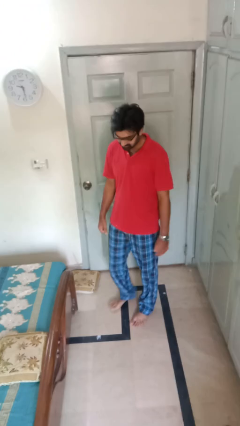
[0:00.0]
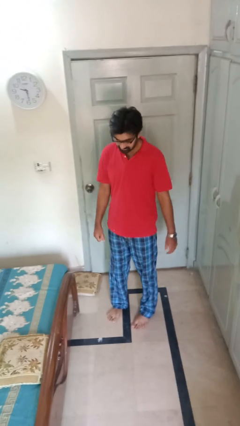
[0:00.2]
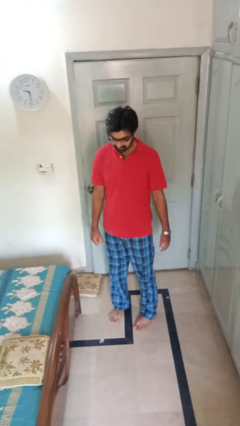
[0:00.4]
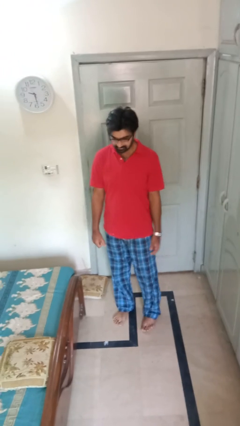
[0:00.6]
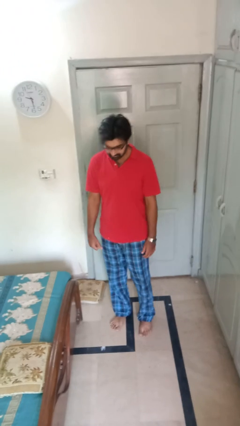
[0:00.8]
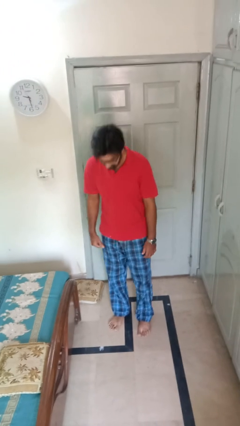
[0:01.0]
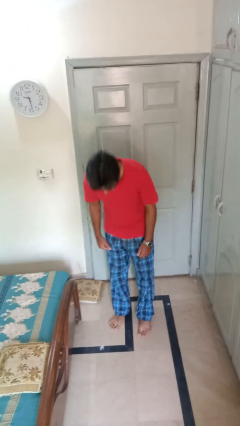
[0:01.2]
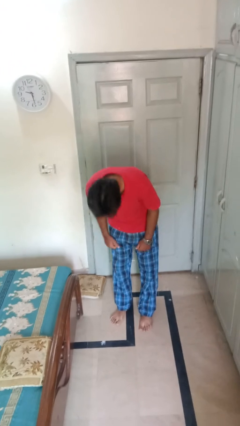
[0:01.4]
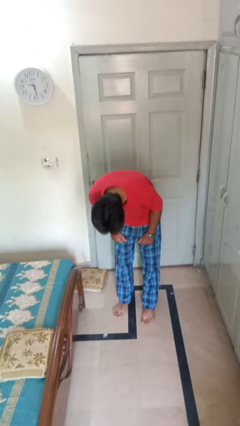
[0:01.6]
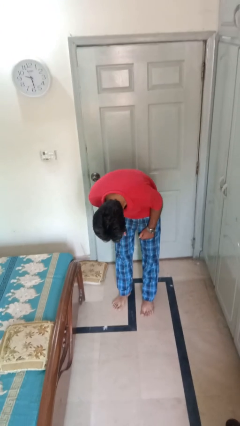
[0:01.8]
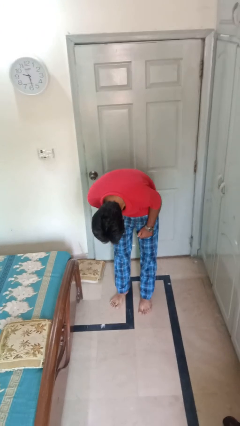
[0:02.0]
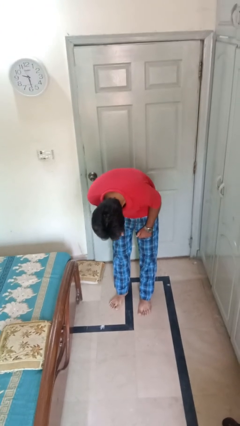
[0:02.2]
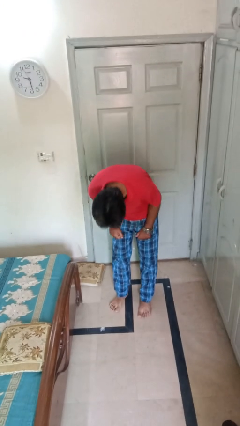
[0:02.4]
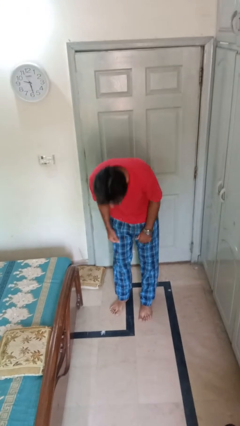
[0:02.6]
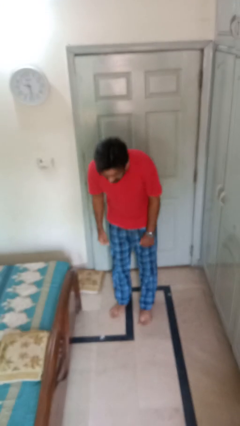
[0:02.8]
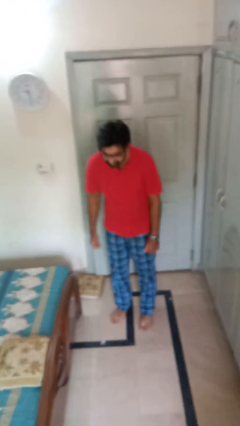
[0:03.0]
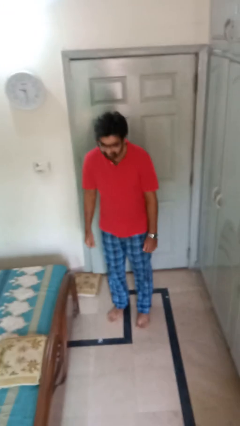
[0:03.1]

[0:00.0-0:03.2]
person bows

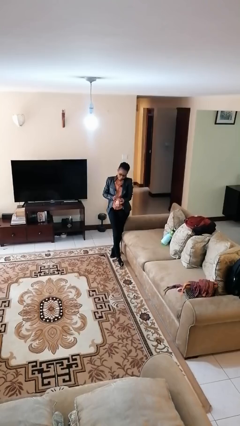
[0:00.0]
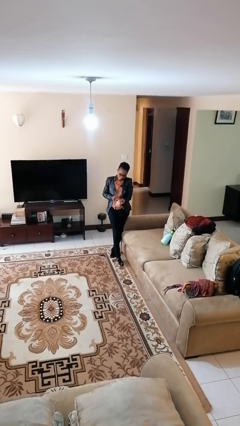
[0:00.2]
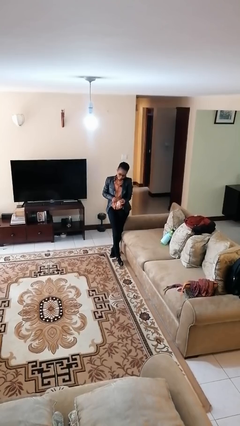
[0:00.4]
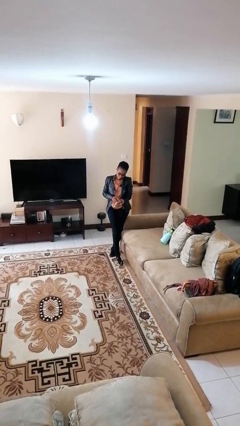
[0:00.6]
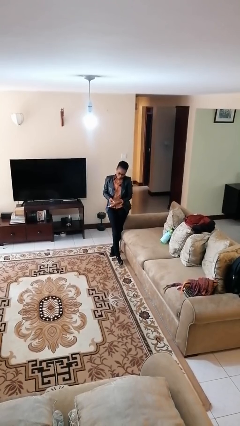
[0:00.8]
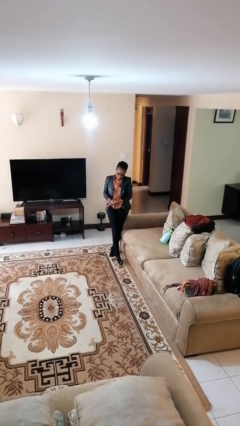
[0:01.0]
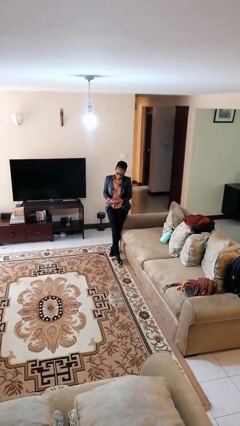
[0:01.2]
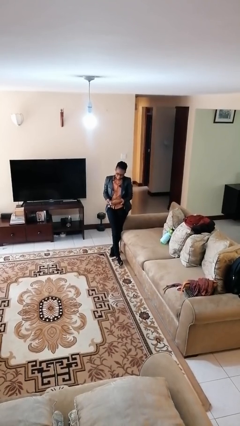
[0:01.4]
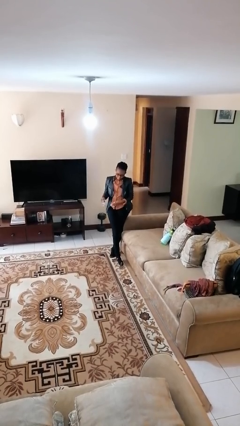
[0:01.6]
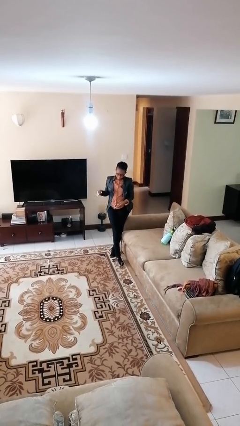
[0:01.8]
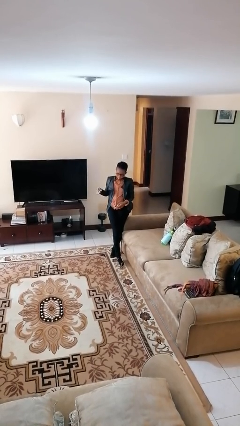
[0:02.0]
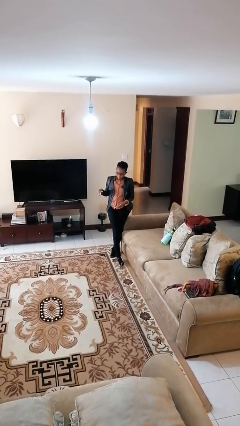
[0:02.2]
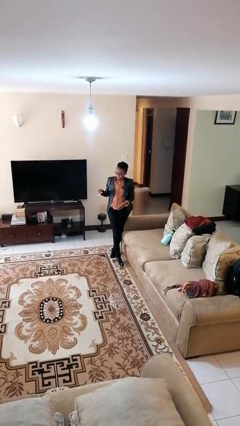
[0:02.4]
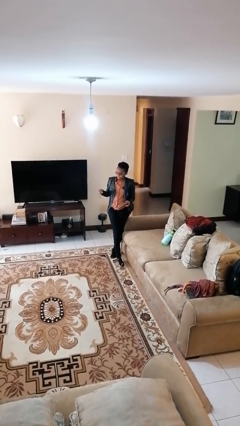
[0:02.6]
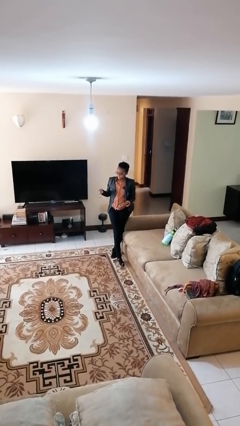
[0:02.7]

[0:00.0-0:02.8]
person takes off wristwatch

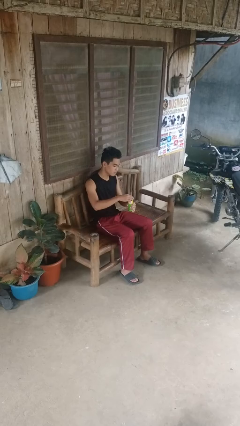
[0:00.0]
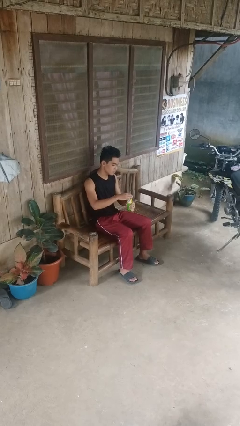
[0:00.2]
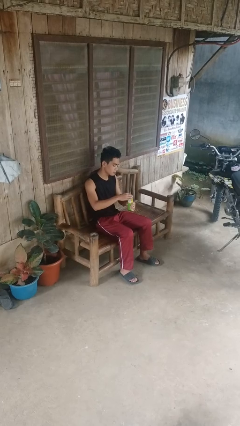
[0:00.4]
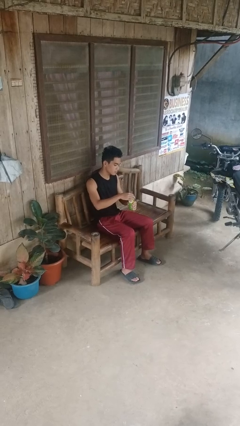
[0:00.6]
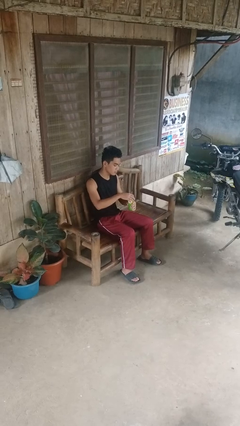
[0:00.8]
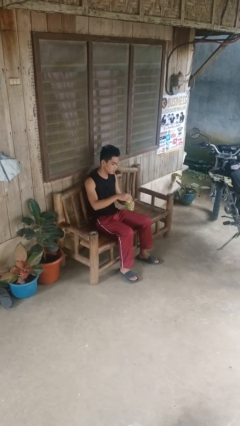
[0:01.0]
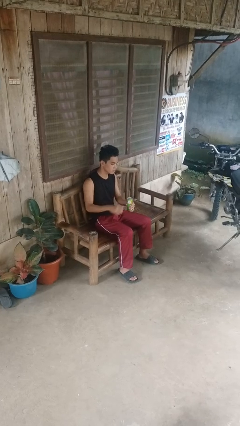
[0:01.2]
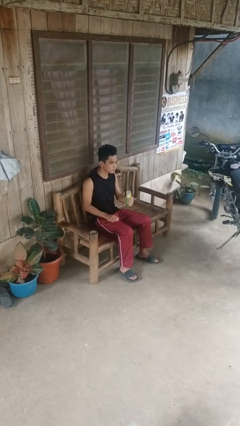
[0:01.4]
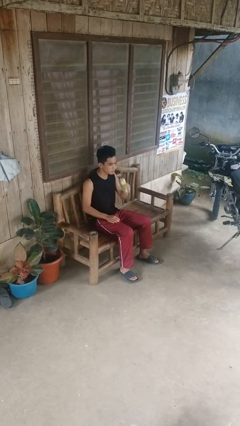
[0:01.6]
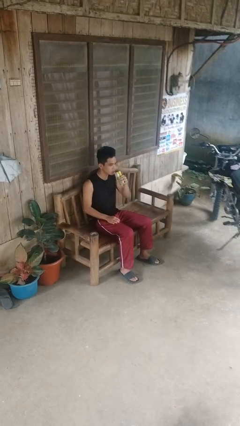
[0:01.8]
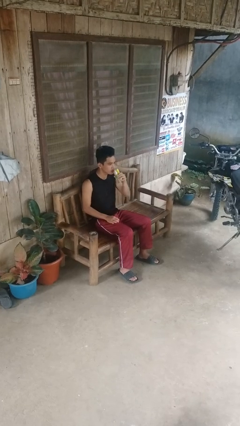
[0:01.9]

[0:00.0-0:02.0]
person opens beverage can

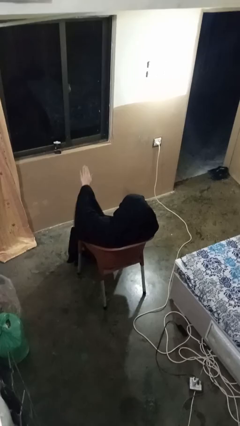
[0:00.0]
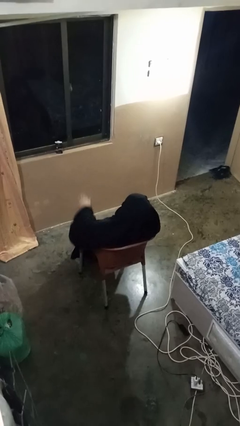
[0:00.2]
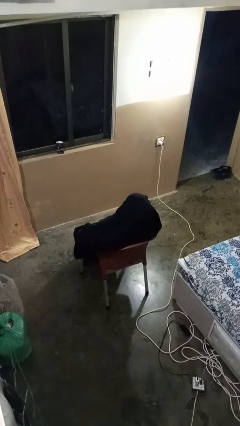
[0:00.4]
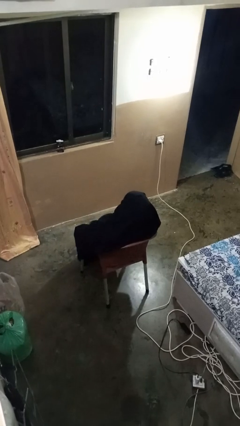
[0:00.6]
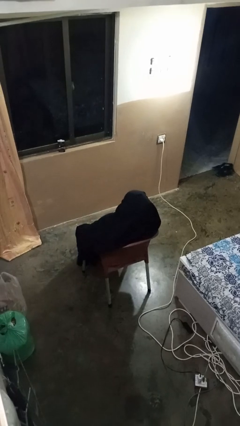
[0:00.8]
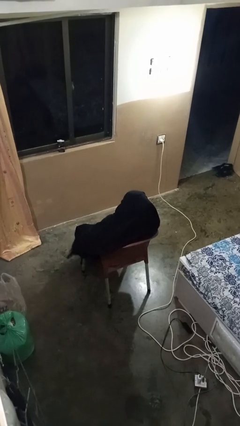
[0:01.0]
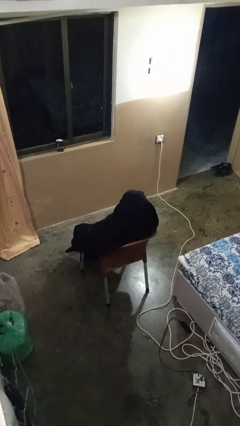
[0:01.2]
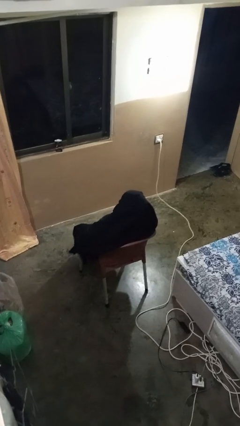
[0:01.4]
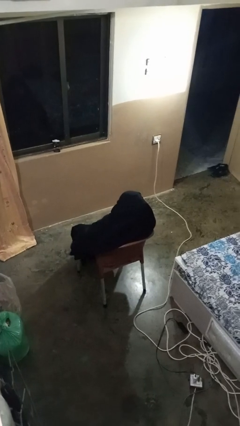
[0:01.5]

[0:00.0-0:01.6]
person gestures lower hand

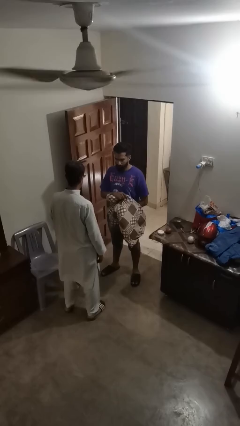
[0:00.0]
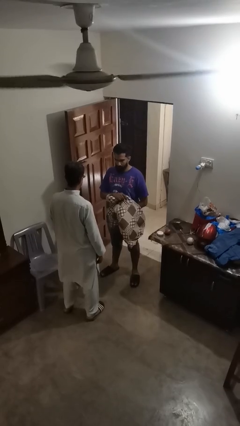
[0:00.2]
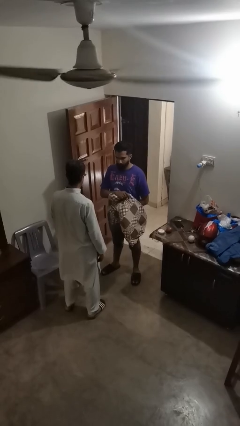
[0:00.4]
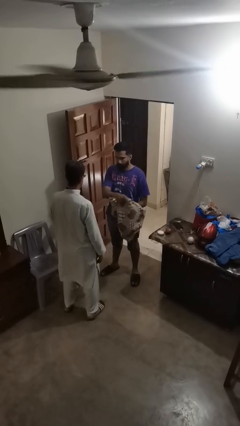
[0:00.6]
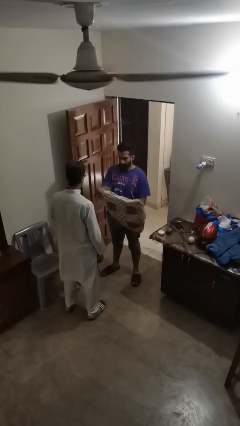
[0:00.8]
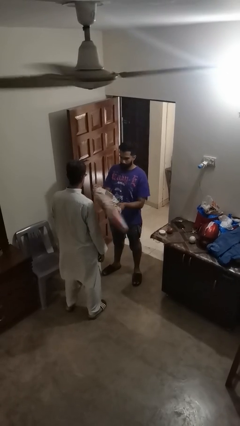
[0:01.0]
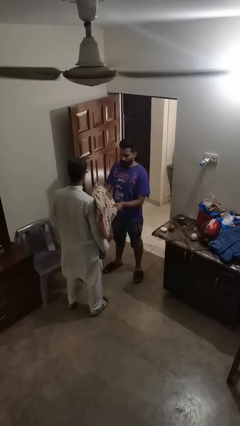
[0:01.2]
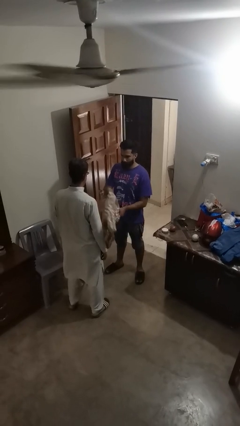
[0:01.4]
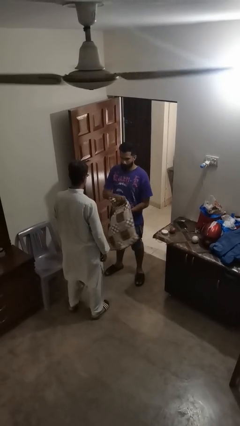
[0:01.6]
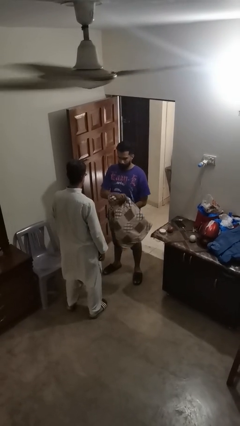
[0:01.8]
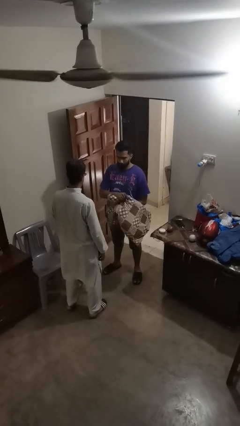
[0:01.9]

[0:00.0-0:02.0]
person hits person with pillow

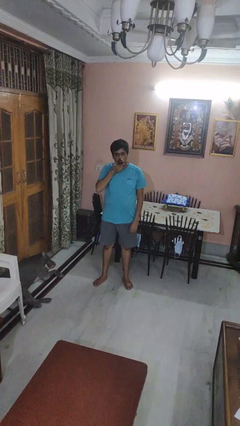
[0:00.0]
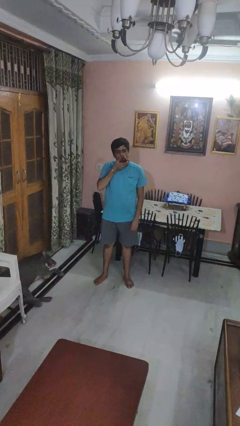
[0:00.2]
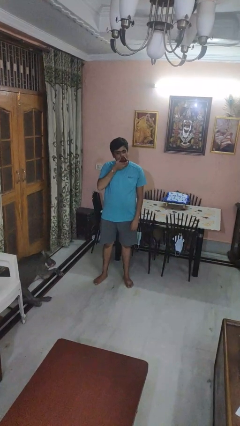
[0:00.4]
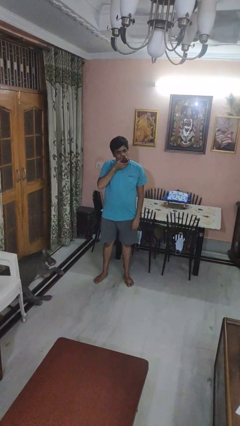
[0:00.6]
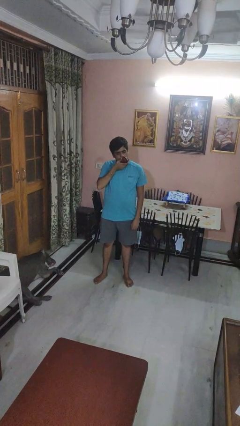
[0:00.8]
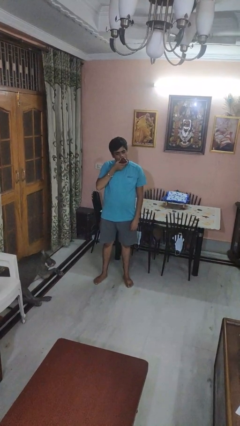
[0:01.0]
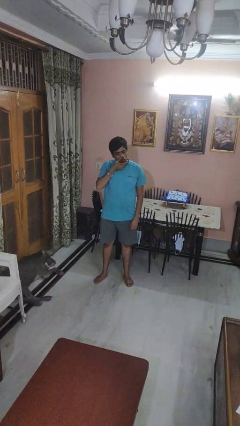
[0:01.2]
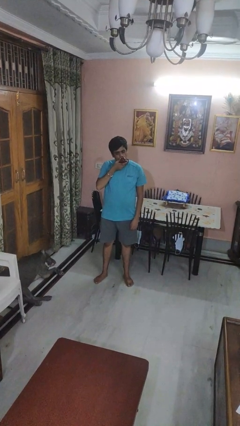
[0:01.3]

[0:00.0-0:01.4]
person eats apple

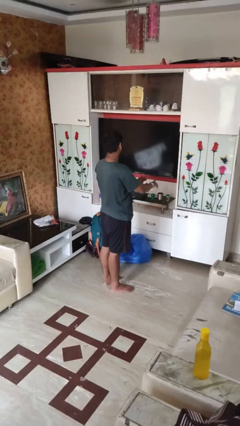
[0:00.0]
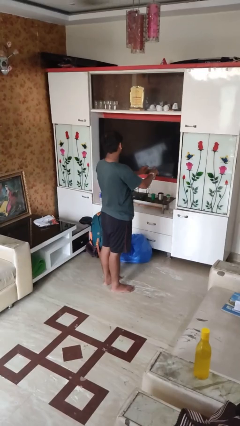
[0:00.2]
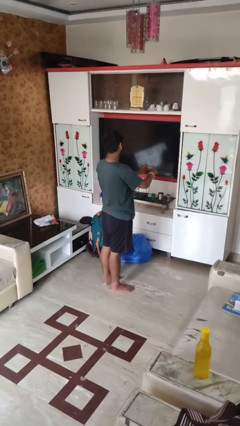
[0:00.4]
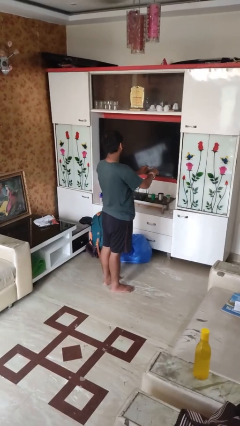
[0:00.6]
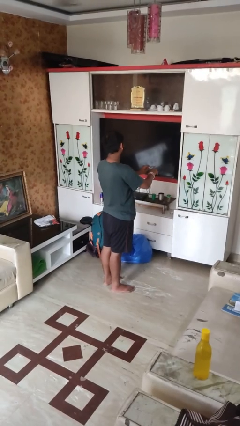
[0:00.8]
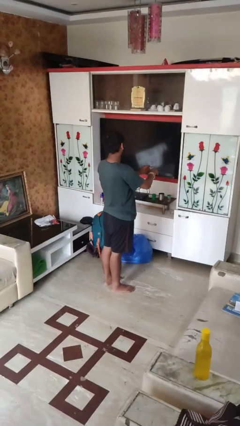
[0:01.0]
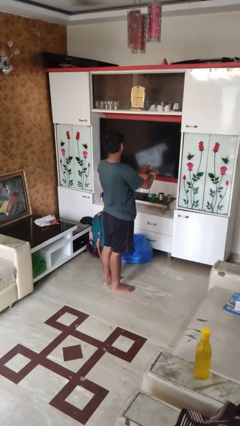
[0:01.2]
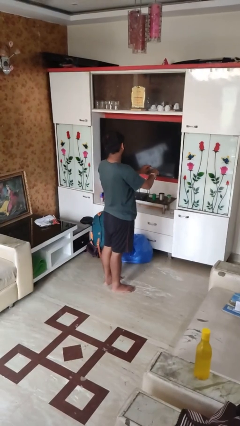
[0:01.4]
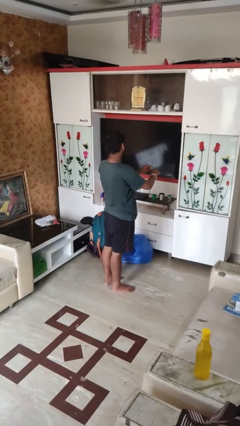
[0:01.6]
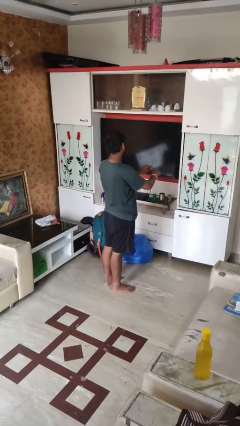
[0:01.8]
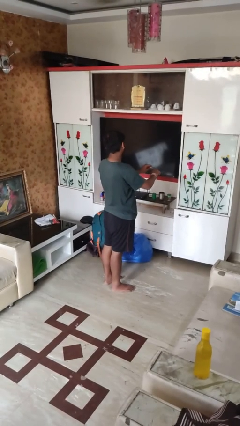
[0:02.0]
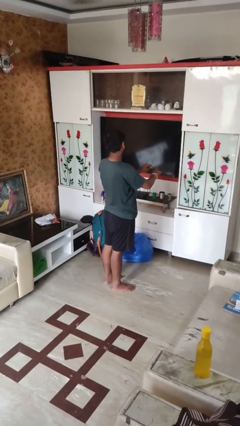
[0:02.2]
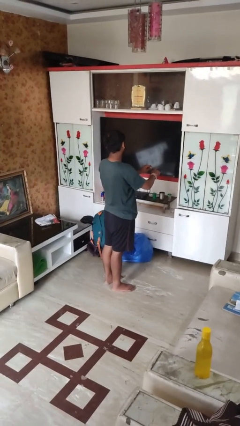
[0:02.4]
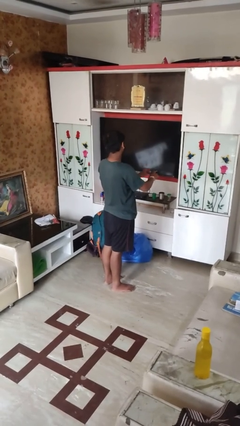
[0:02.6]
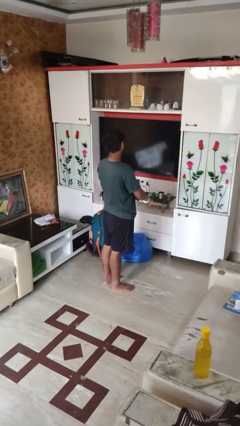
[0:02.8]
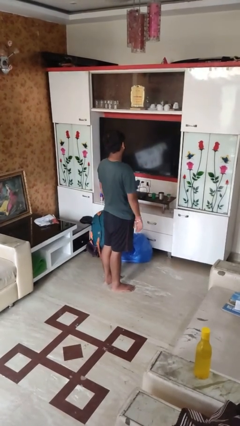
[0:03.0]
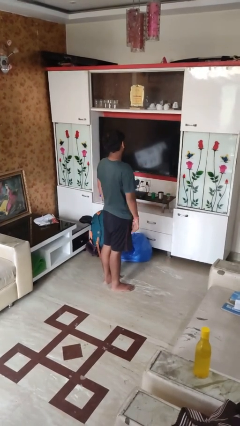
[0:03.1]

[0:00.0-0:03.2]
person files fingernails

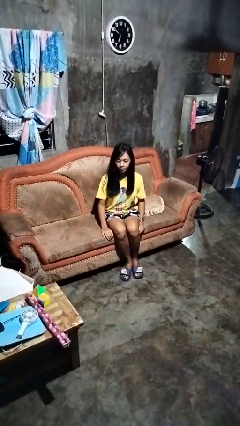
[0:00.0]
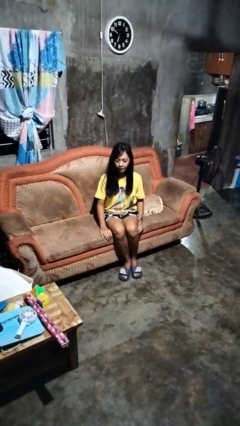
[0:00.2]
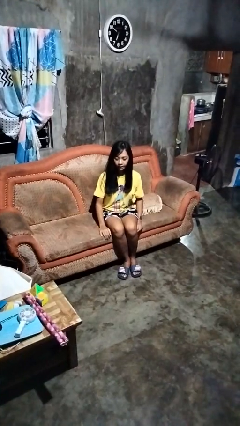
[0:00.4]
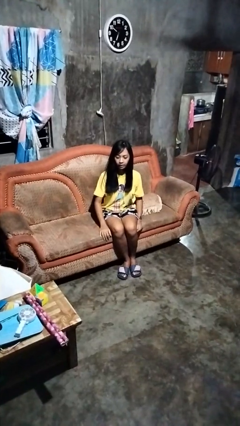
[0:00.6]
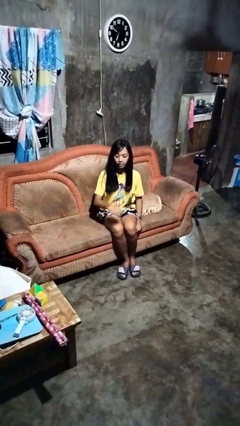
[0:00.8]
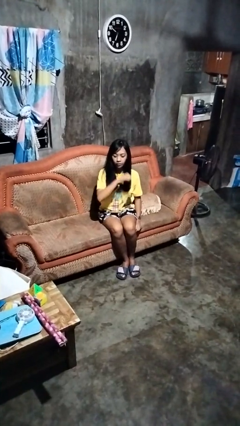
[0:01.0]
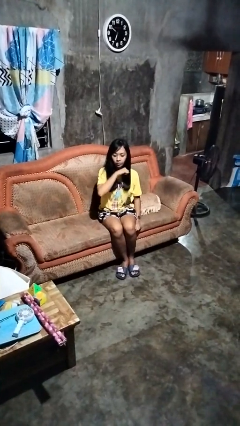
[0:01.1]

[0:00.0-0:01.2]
person gestures cut
